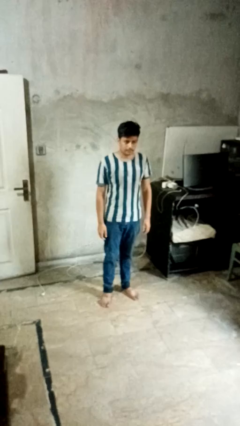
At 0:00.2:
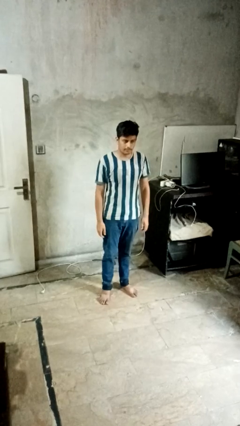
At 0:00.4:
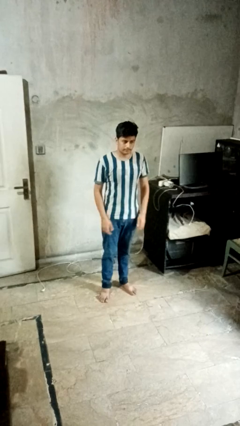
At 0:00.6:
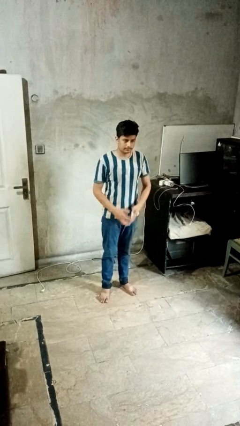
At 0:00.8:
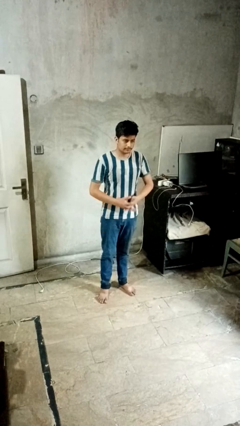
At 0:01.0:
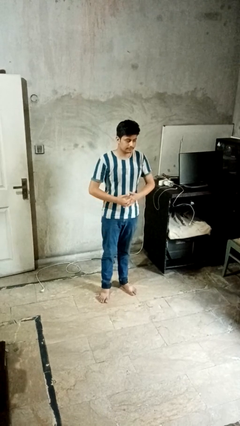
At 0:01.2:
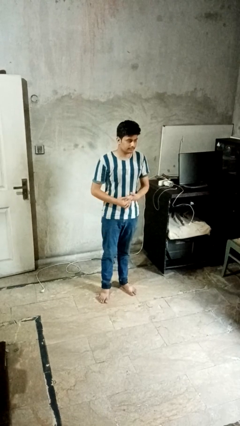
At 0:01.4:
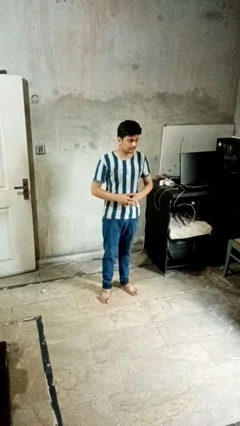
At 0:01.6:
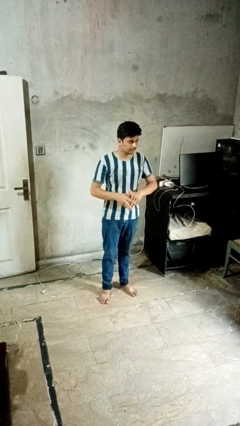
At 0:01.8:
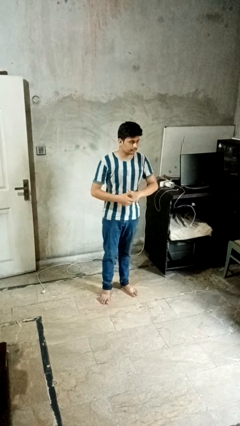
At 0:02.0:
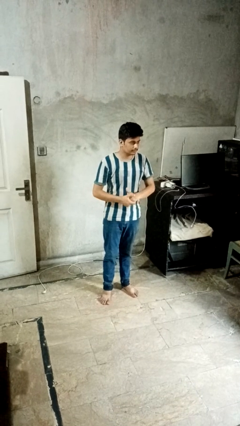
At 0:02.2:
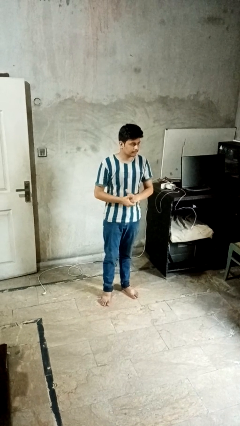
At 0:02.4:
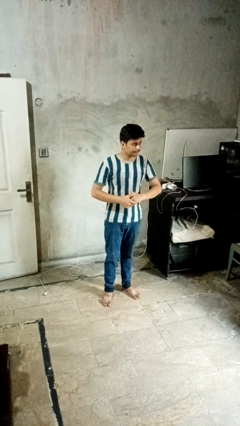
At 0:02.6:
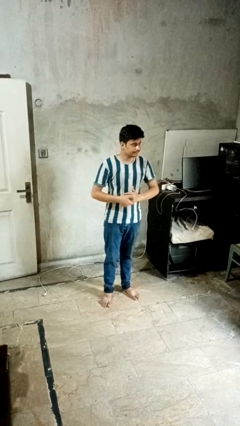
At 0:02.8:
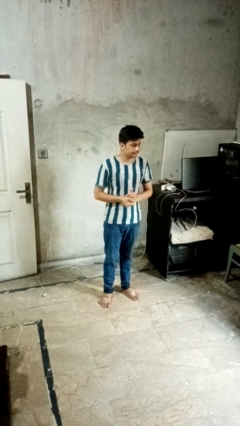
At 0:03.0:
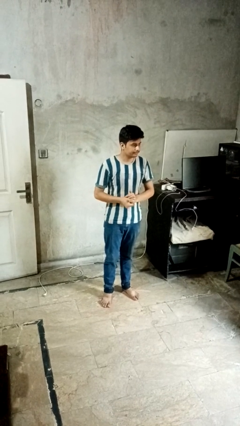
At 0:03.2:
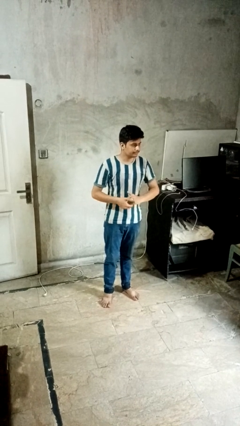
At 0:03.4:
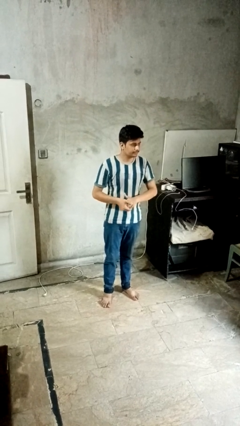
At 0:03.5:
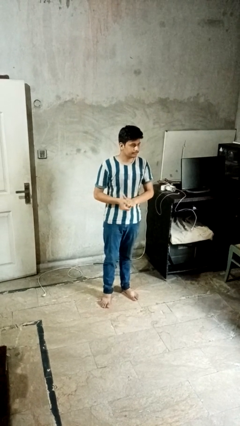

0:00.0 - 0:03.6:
person cracks knuckles

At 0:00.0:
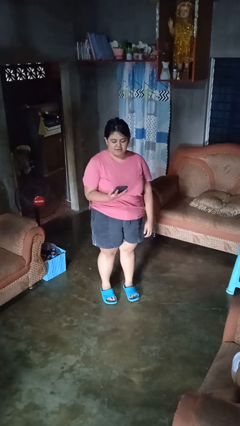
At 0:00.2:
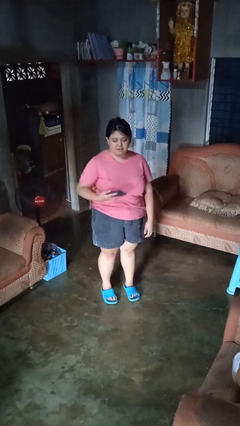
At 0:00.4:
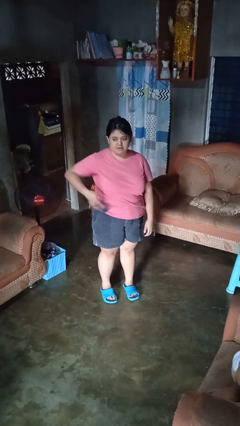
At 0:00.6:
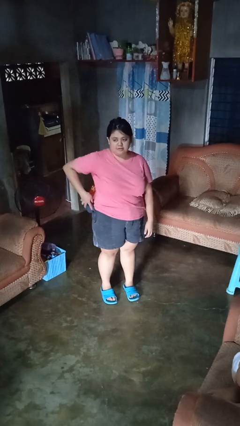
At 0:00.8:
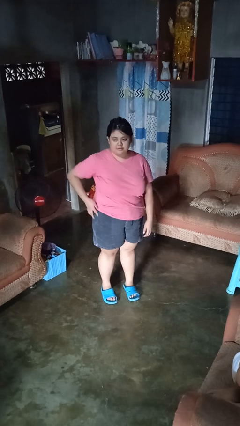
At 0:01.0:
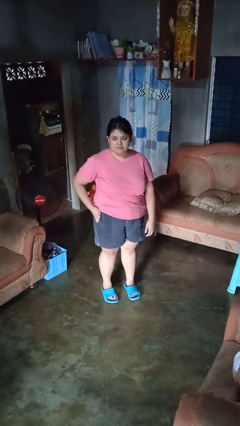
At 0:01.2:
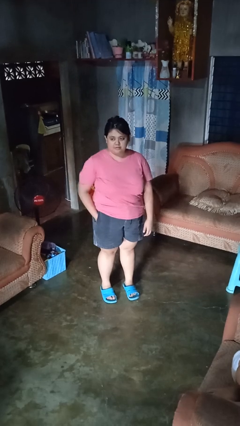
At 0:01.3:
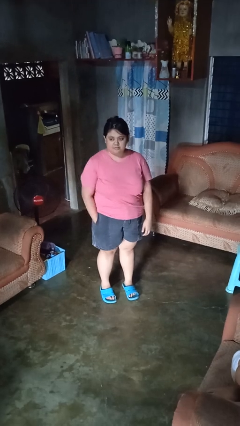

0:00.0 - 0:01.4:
person puts phone into pocket

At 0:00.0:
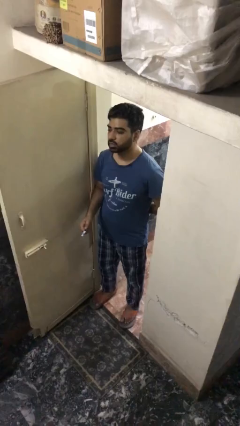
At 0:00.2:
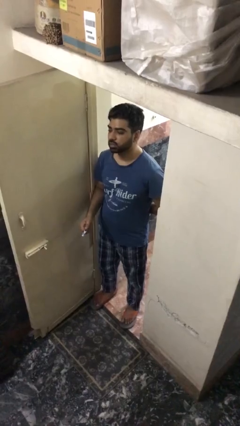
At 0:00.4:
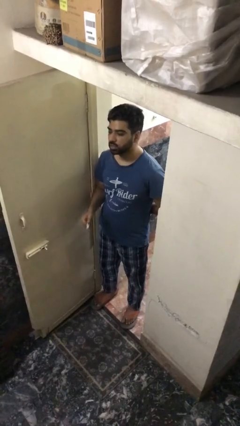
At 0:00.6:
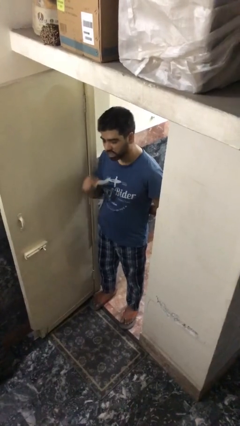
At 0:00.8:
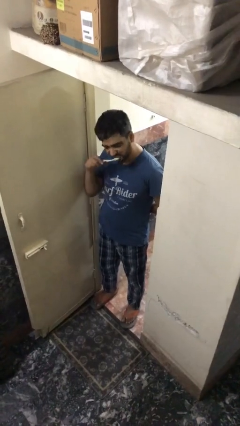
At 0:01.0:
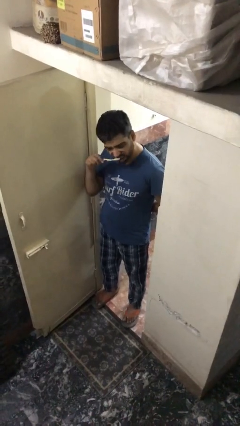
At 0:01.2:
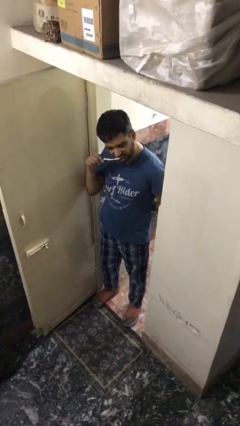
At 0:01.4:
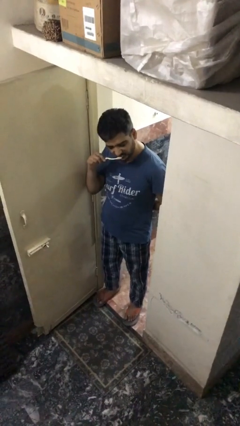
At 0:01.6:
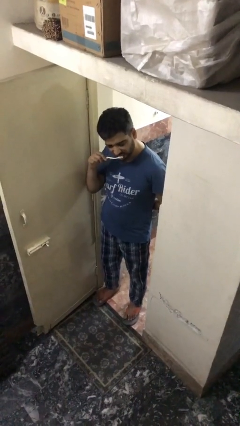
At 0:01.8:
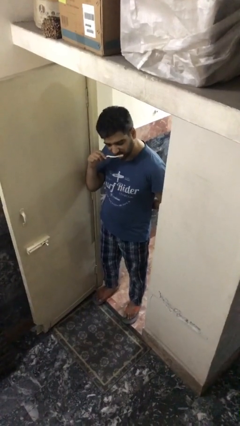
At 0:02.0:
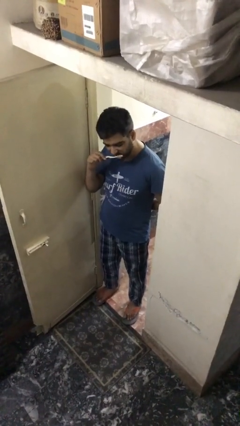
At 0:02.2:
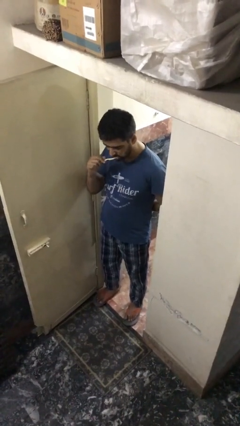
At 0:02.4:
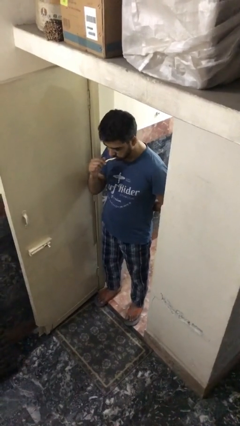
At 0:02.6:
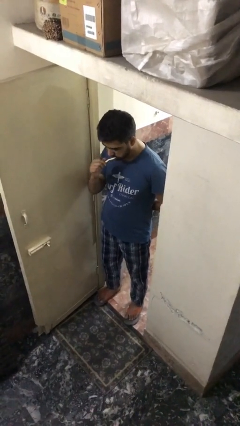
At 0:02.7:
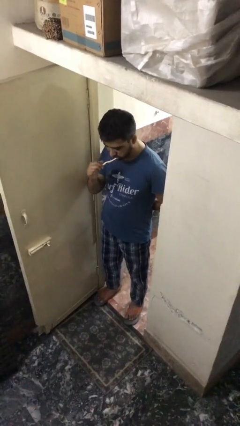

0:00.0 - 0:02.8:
person brushes teeth

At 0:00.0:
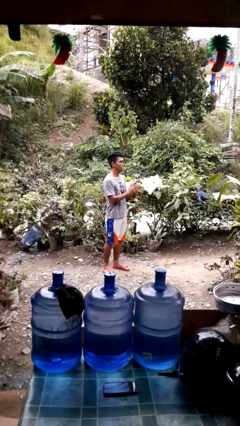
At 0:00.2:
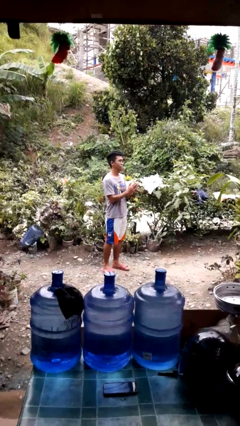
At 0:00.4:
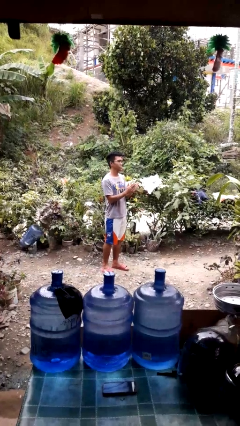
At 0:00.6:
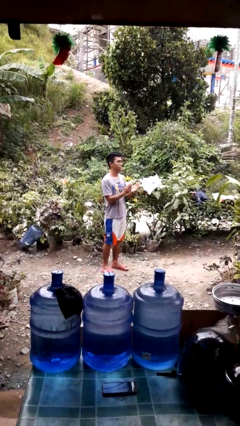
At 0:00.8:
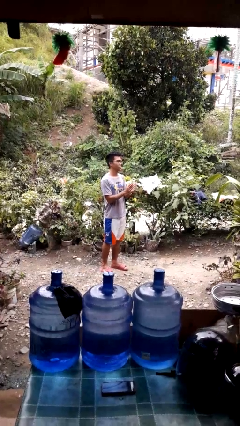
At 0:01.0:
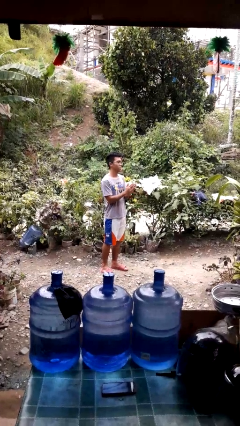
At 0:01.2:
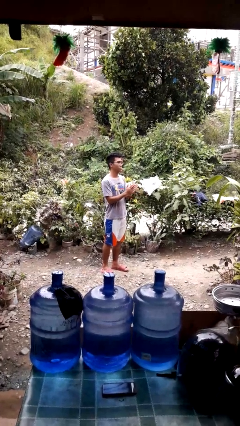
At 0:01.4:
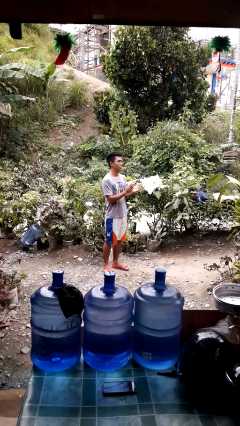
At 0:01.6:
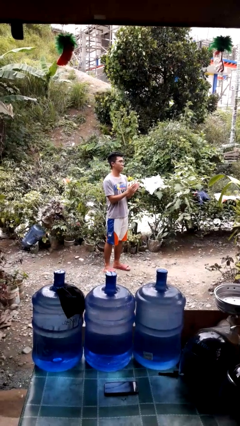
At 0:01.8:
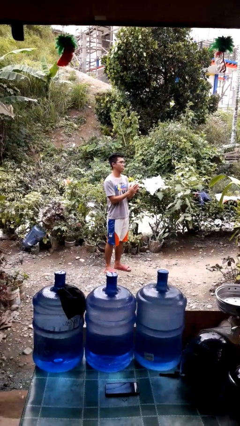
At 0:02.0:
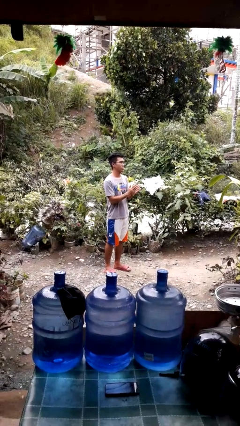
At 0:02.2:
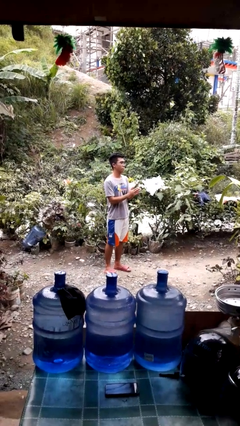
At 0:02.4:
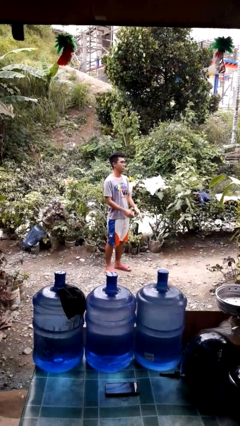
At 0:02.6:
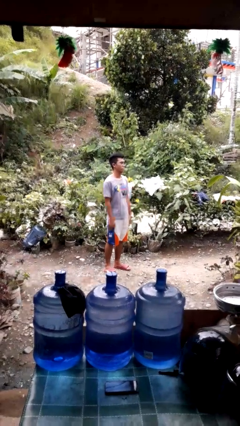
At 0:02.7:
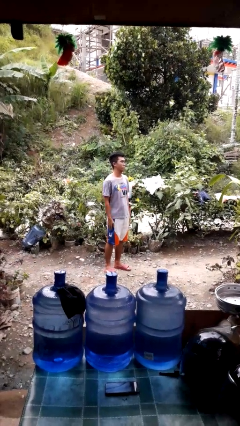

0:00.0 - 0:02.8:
person claps hands

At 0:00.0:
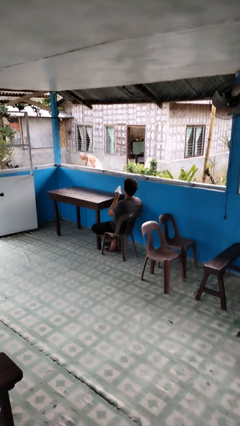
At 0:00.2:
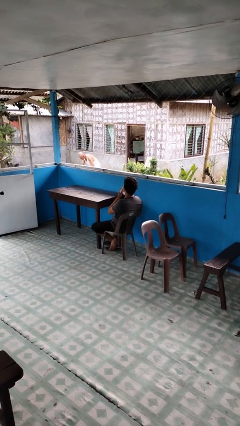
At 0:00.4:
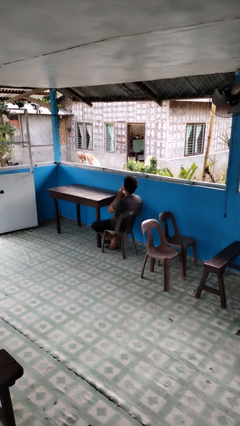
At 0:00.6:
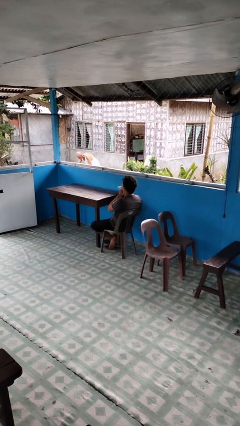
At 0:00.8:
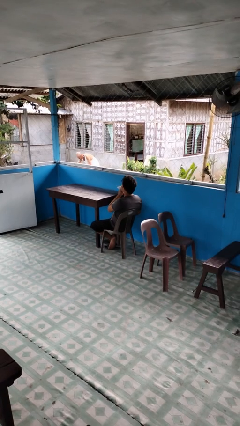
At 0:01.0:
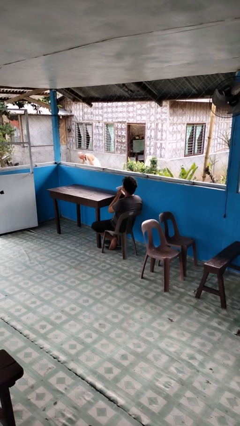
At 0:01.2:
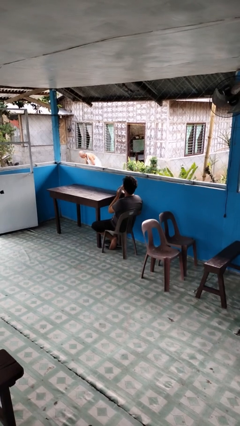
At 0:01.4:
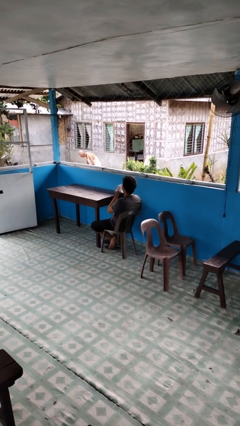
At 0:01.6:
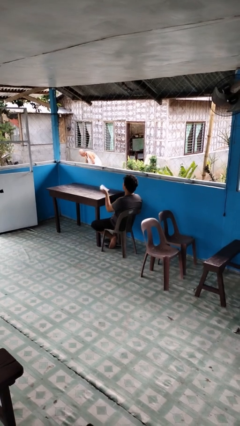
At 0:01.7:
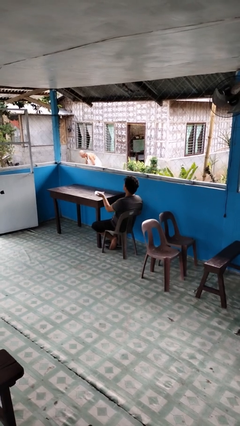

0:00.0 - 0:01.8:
person wipes mouth with napkin

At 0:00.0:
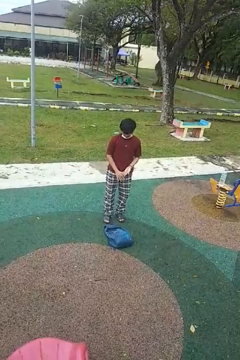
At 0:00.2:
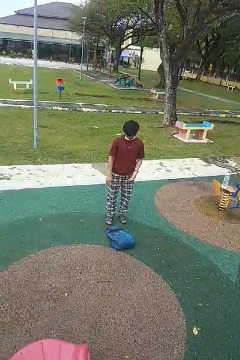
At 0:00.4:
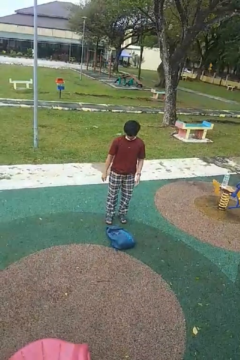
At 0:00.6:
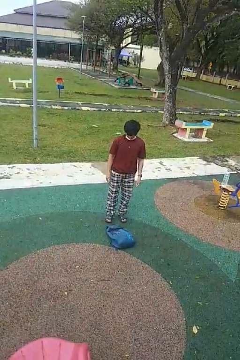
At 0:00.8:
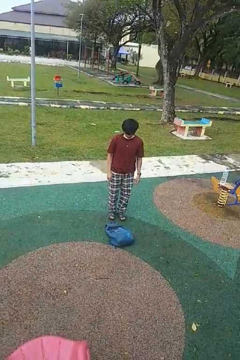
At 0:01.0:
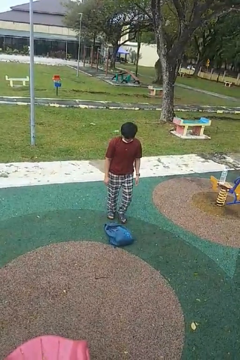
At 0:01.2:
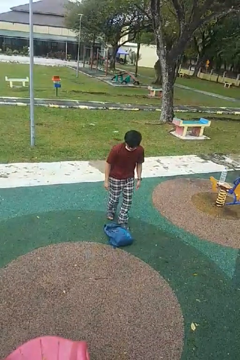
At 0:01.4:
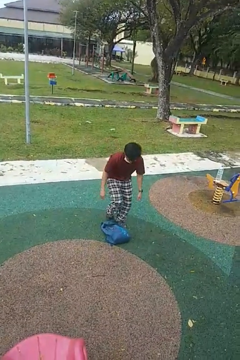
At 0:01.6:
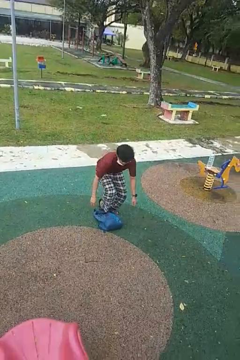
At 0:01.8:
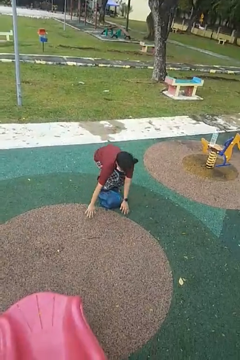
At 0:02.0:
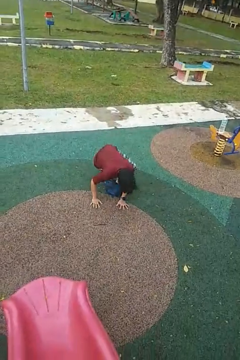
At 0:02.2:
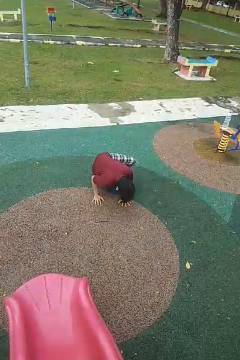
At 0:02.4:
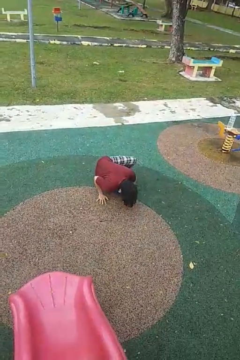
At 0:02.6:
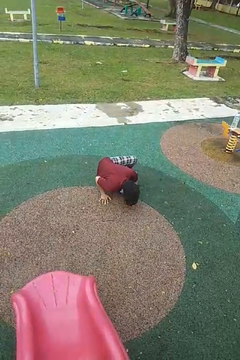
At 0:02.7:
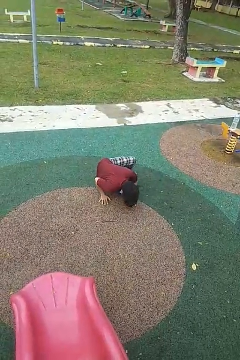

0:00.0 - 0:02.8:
person trips on object on floor

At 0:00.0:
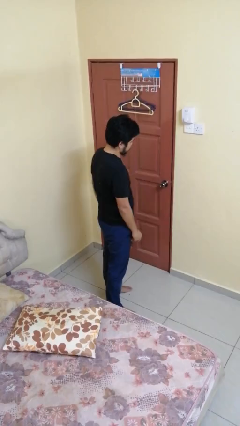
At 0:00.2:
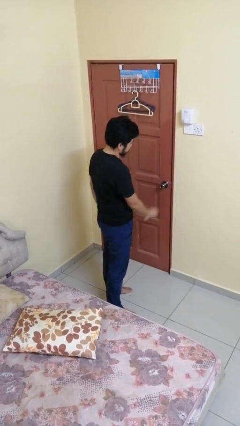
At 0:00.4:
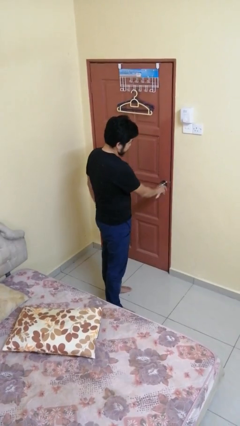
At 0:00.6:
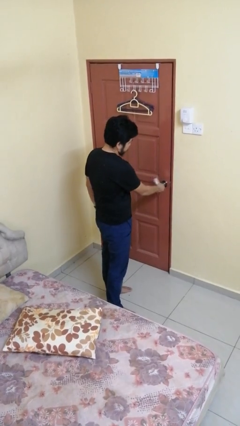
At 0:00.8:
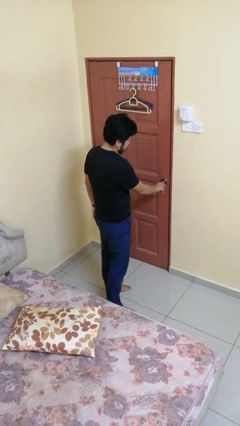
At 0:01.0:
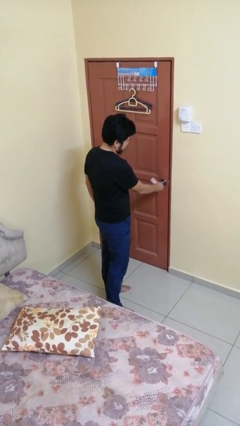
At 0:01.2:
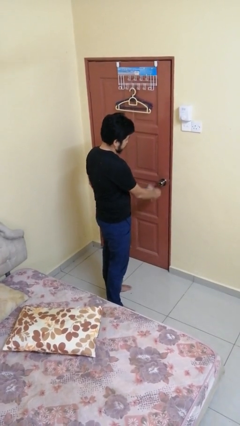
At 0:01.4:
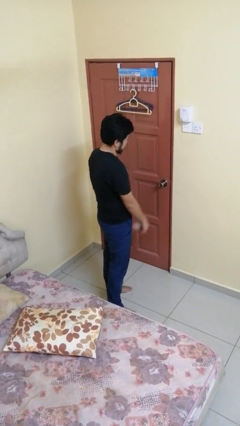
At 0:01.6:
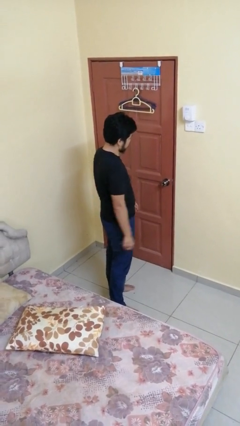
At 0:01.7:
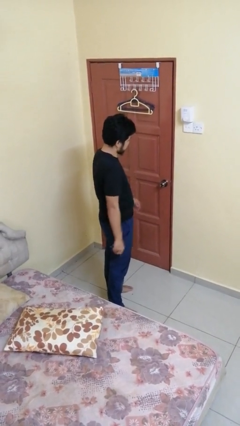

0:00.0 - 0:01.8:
person unlocks door with keys

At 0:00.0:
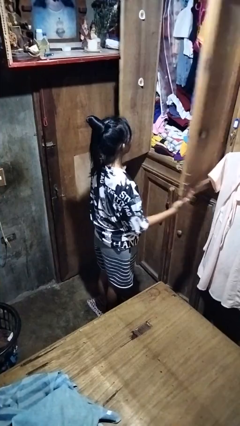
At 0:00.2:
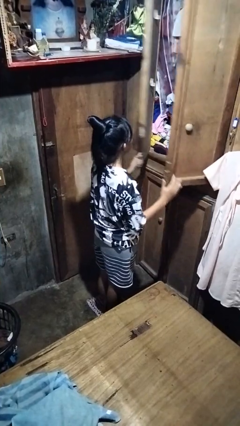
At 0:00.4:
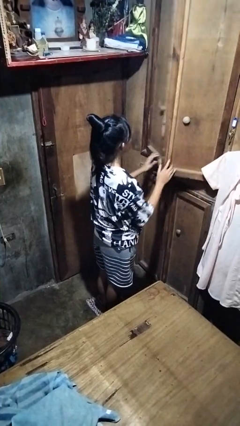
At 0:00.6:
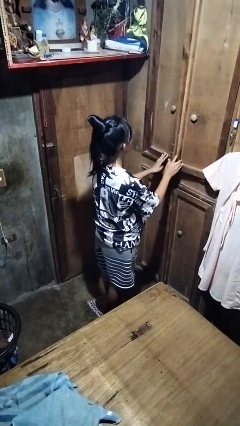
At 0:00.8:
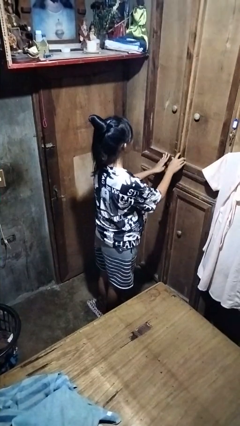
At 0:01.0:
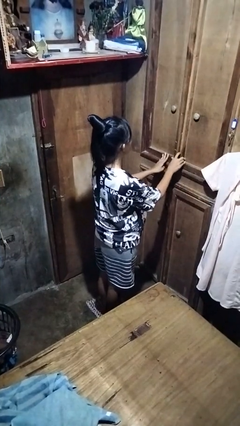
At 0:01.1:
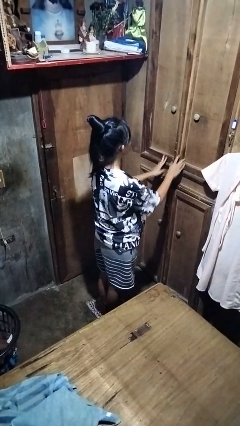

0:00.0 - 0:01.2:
person closes closet door
